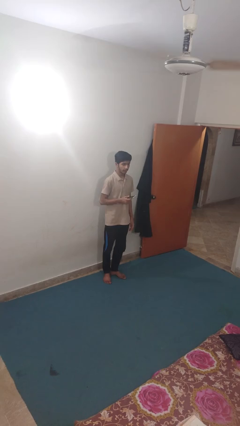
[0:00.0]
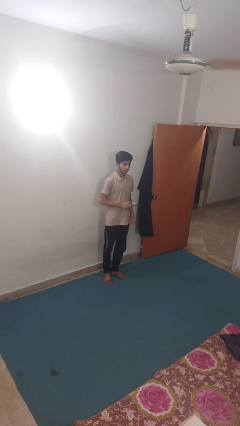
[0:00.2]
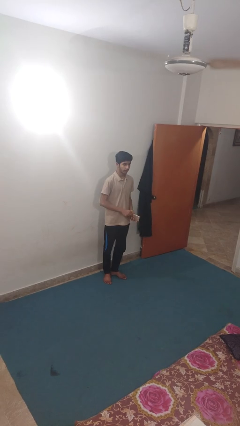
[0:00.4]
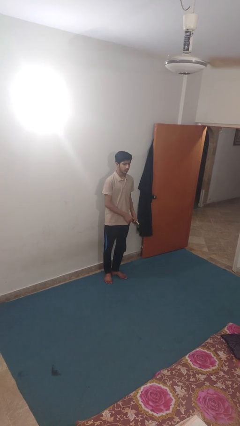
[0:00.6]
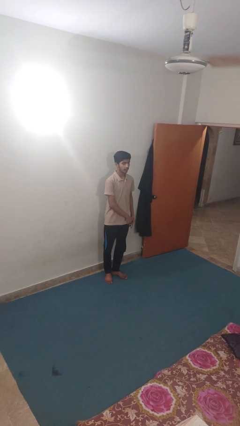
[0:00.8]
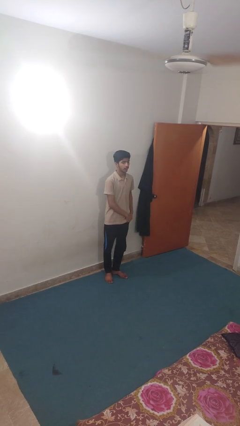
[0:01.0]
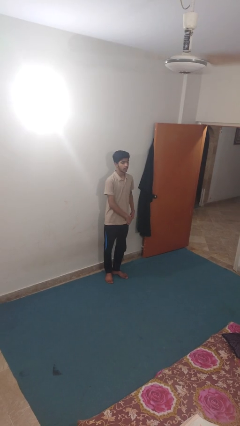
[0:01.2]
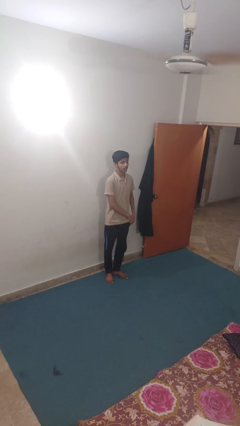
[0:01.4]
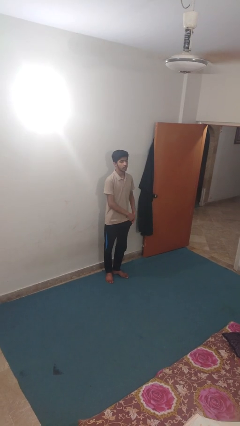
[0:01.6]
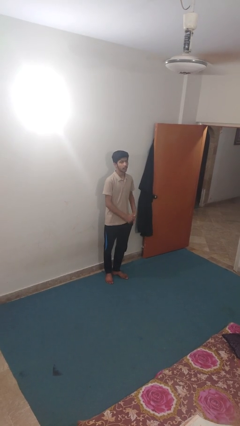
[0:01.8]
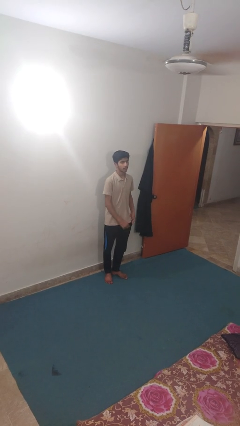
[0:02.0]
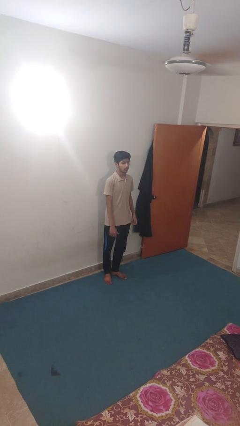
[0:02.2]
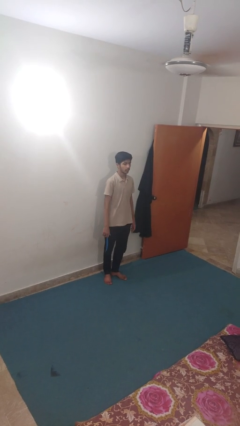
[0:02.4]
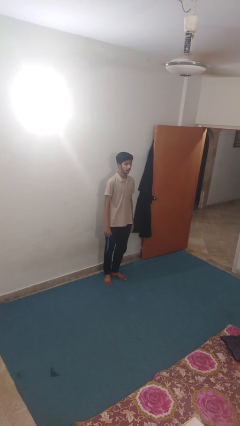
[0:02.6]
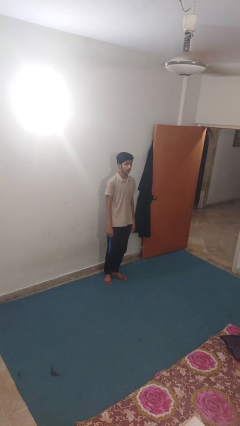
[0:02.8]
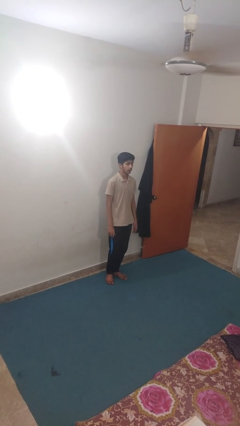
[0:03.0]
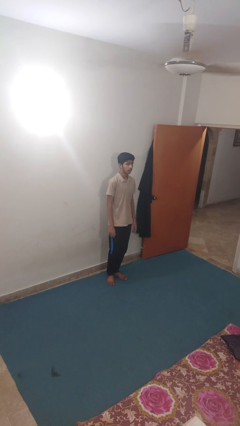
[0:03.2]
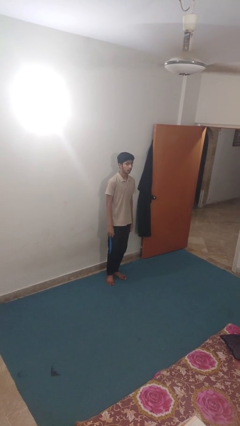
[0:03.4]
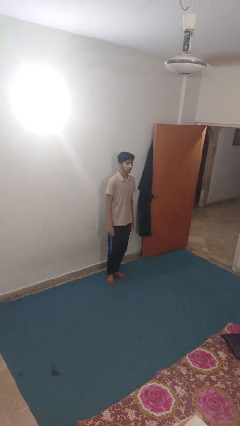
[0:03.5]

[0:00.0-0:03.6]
person puts phone into pocket

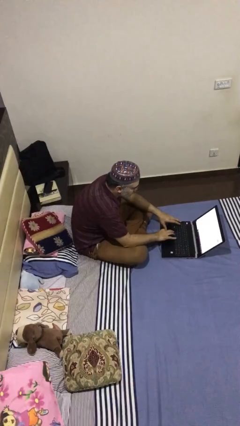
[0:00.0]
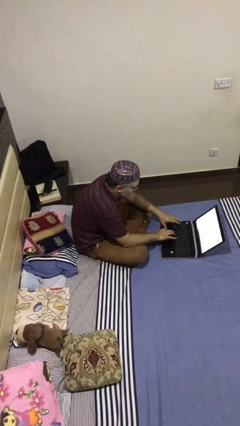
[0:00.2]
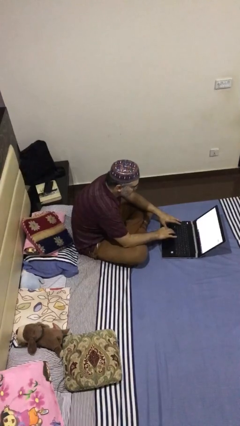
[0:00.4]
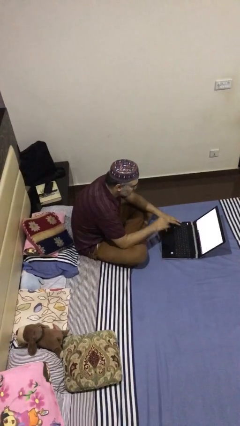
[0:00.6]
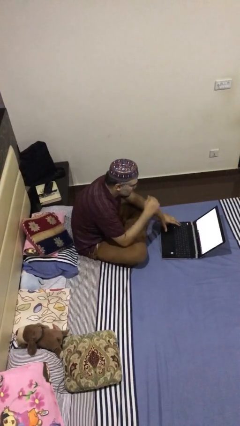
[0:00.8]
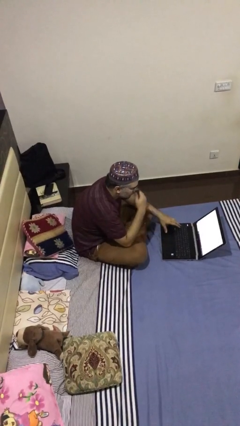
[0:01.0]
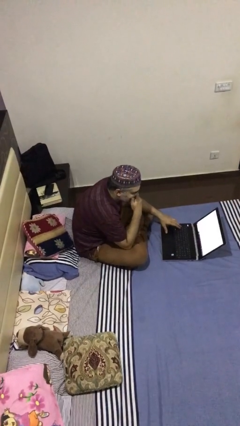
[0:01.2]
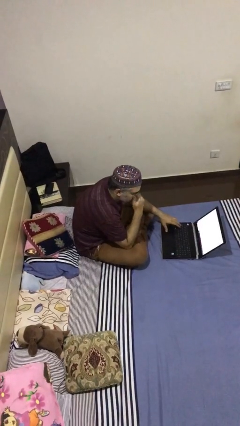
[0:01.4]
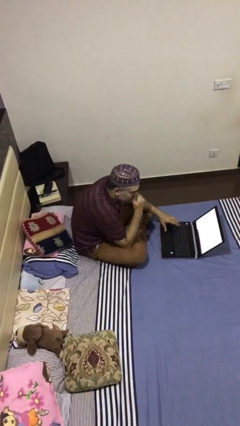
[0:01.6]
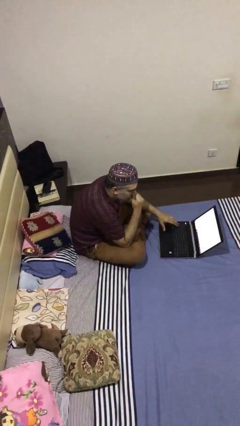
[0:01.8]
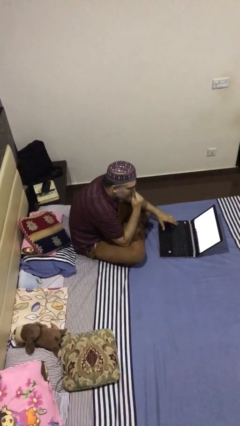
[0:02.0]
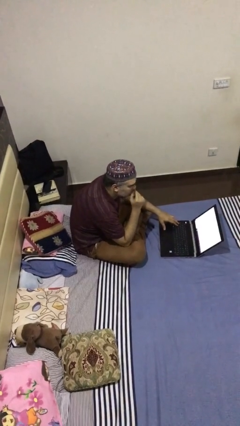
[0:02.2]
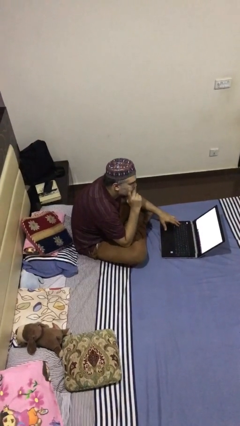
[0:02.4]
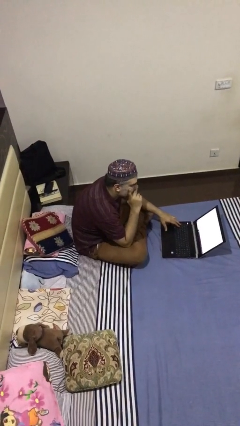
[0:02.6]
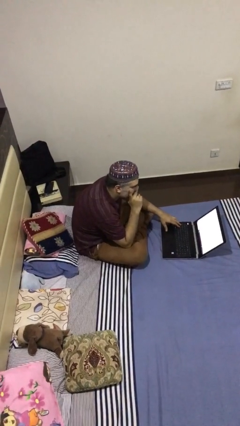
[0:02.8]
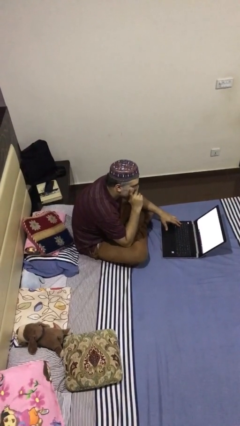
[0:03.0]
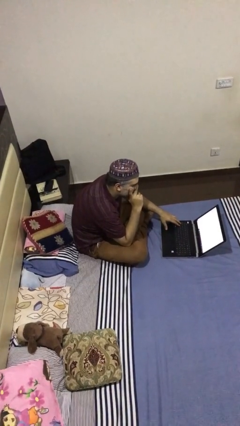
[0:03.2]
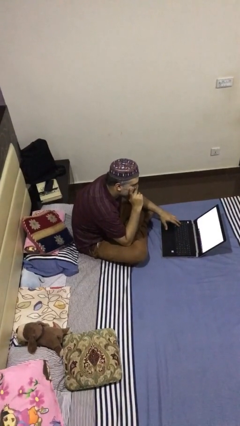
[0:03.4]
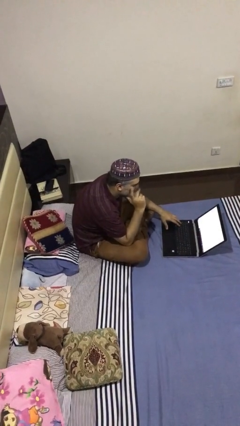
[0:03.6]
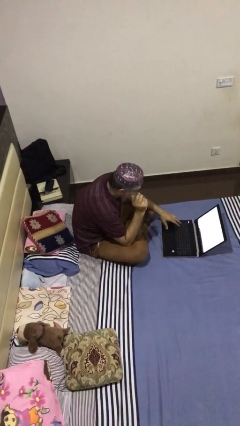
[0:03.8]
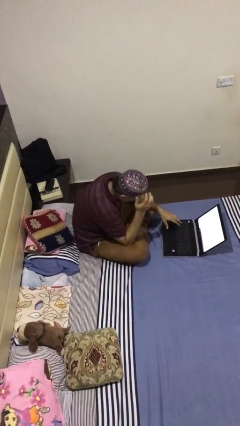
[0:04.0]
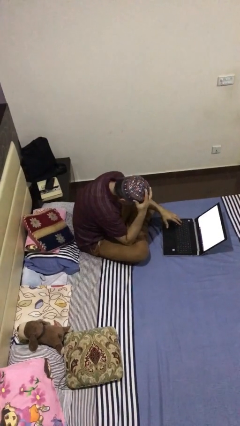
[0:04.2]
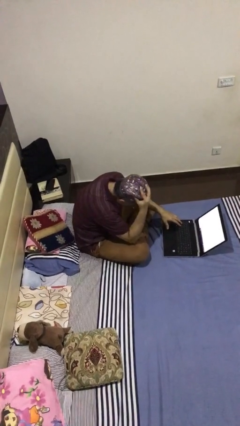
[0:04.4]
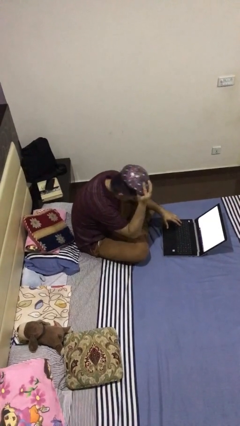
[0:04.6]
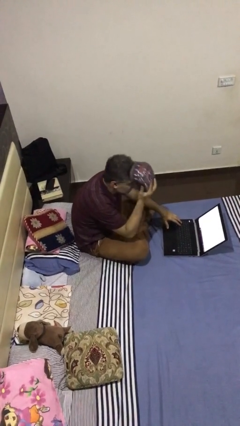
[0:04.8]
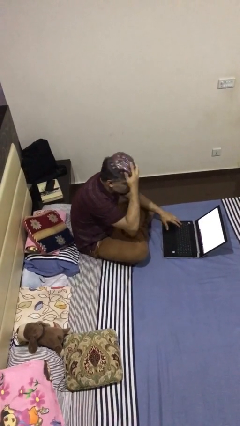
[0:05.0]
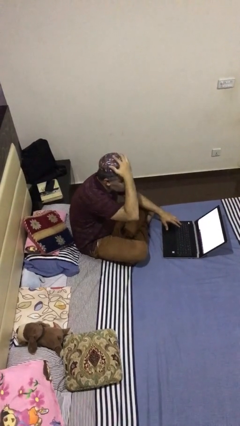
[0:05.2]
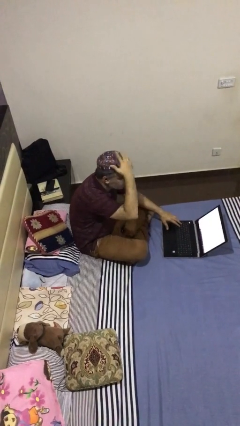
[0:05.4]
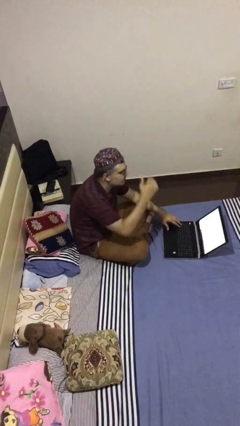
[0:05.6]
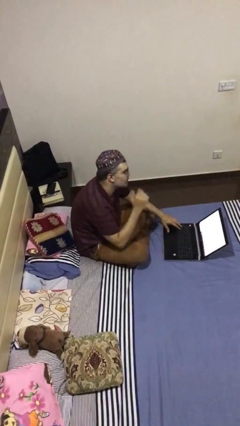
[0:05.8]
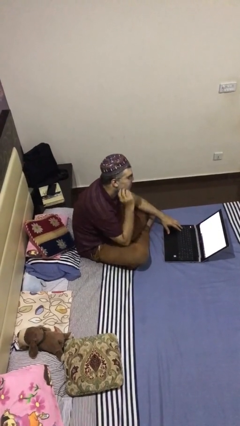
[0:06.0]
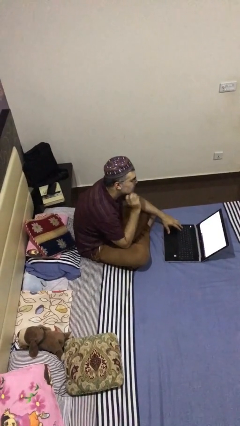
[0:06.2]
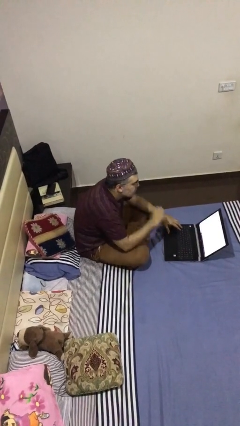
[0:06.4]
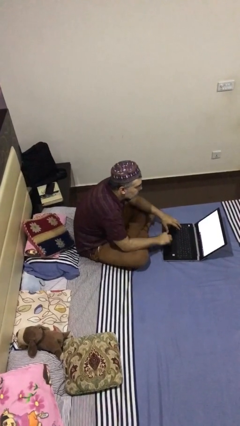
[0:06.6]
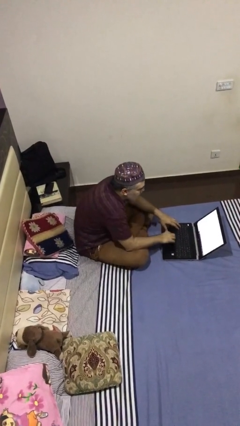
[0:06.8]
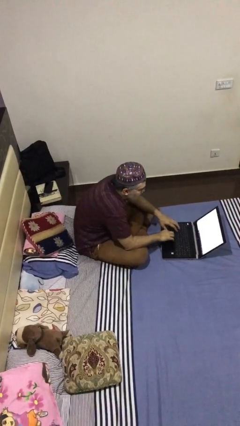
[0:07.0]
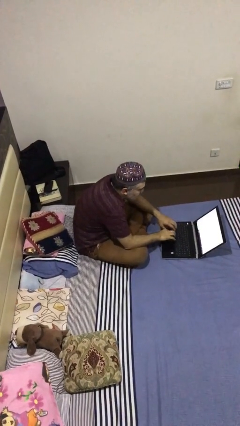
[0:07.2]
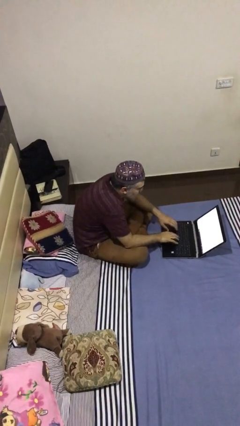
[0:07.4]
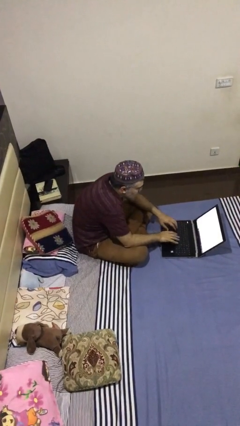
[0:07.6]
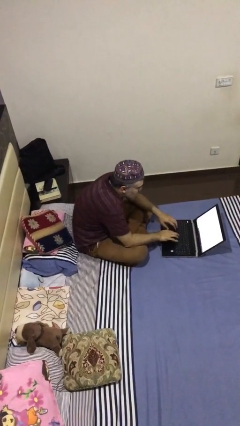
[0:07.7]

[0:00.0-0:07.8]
person interacts with laptop

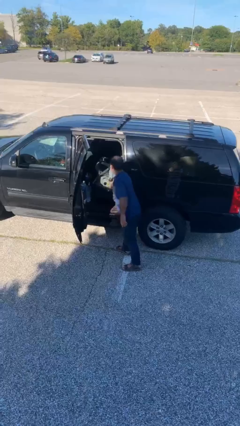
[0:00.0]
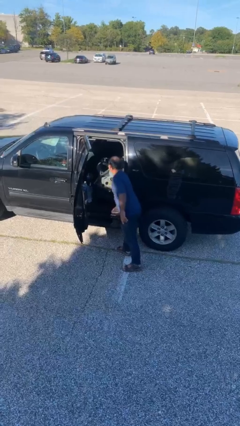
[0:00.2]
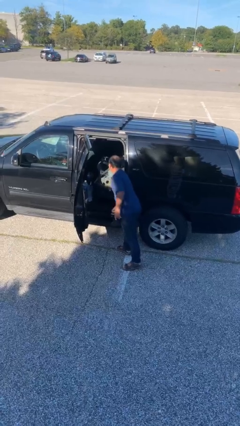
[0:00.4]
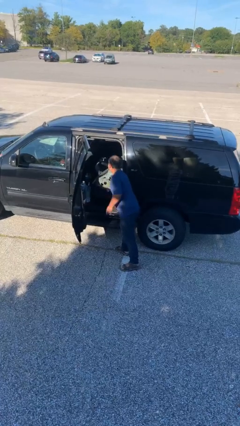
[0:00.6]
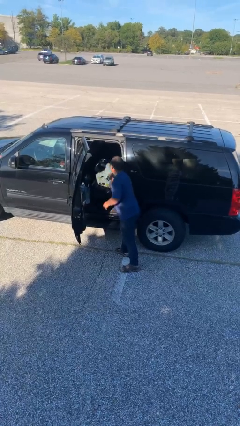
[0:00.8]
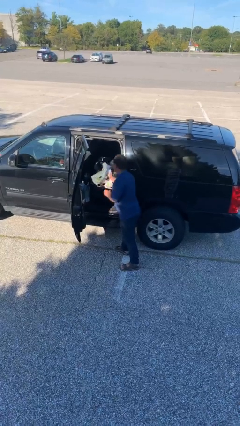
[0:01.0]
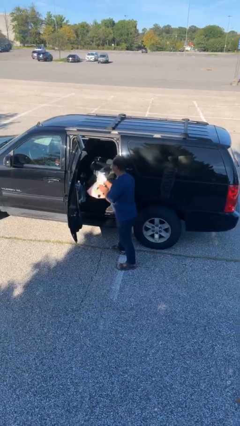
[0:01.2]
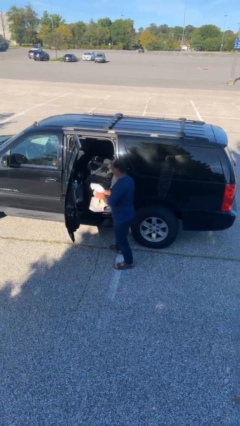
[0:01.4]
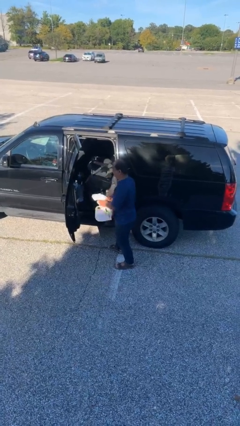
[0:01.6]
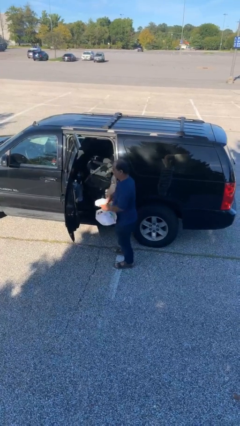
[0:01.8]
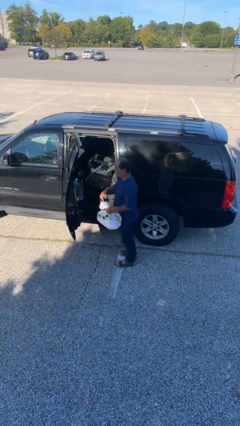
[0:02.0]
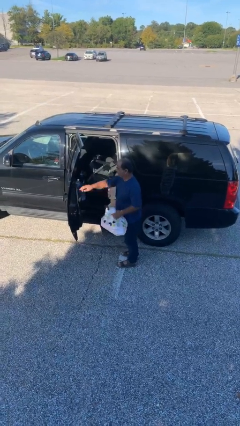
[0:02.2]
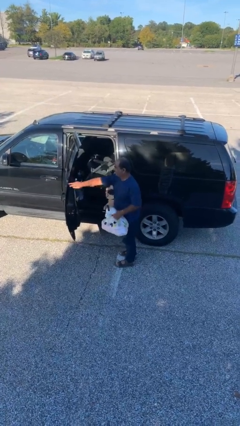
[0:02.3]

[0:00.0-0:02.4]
person unloads car

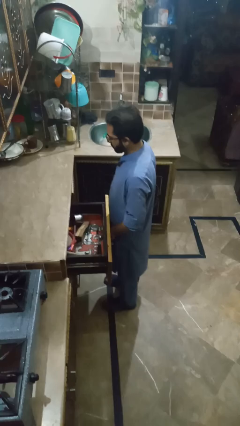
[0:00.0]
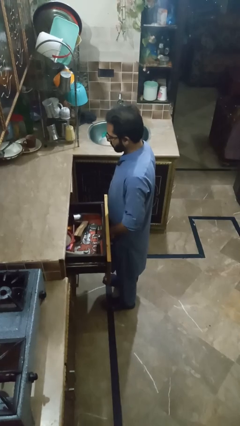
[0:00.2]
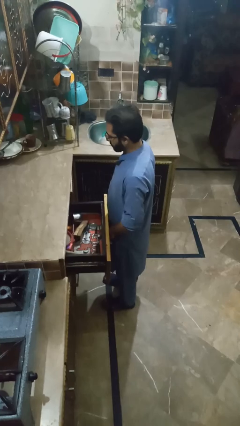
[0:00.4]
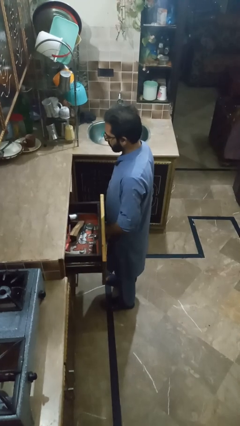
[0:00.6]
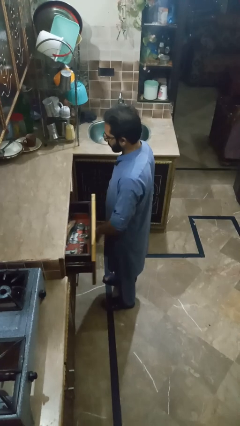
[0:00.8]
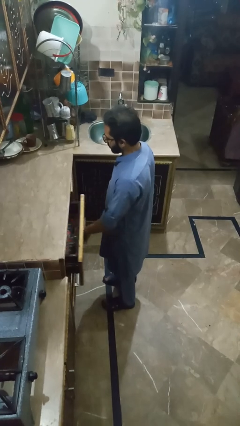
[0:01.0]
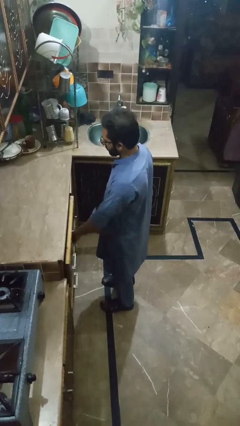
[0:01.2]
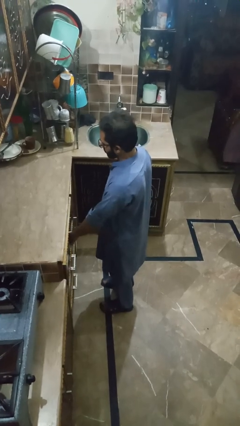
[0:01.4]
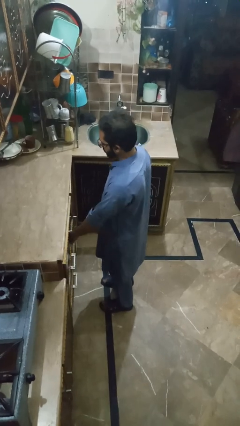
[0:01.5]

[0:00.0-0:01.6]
person closes kitchen drawer

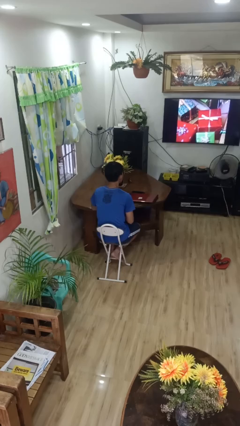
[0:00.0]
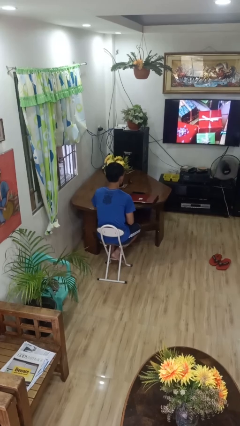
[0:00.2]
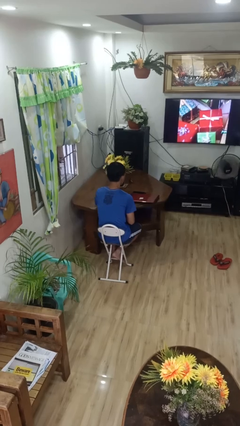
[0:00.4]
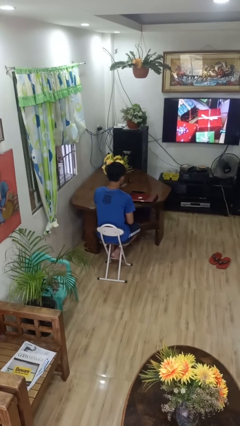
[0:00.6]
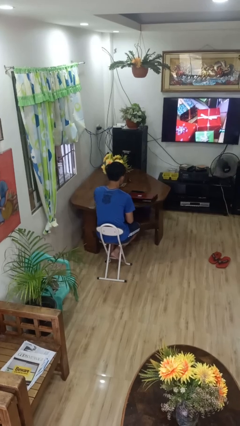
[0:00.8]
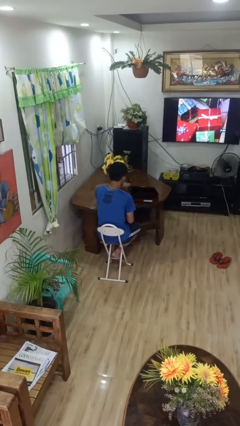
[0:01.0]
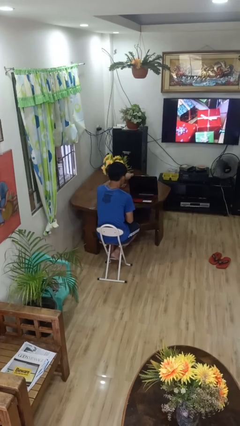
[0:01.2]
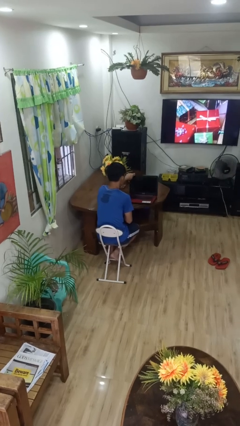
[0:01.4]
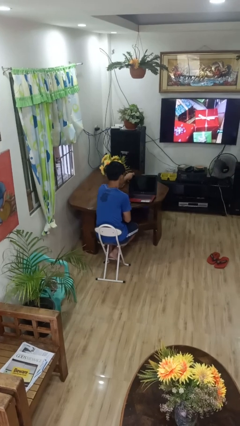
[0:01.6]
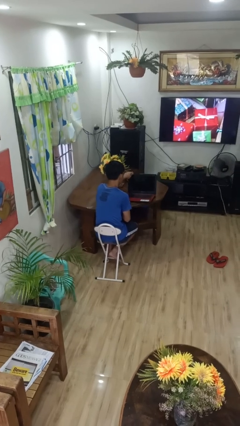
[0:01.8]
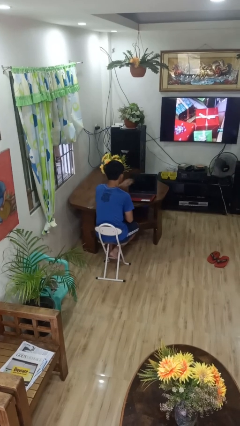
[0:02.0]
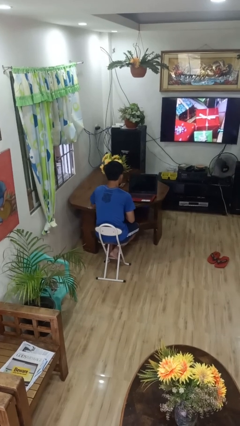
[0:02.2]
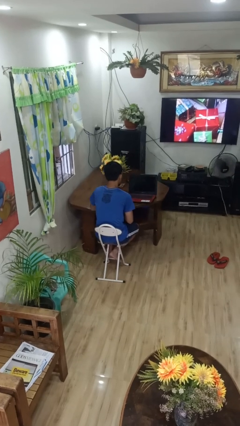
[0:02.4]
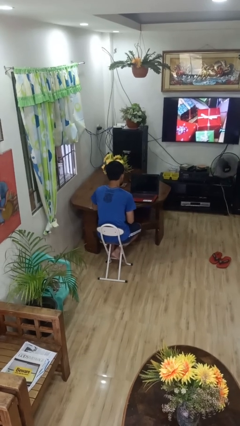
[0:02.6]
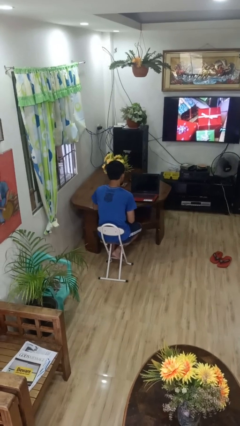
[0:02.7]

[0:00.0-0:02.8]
person opens laptop

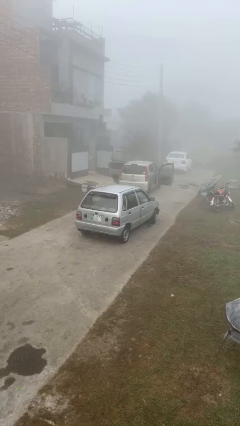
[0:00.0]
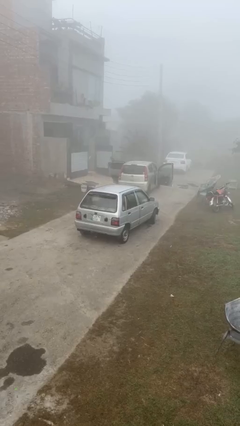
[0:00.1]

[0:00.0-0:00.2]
car drops off person
